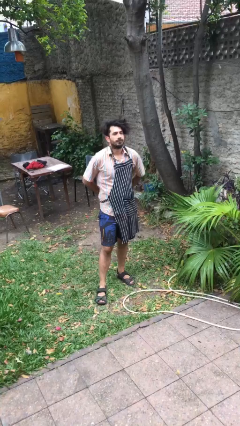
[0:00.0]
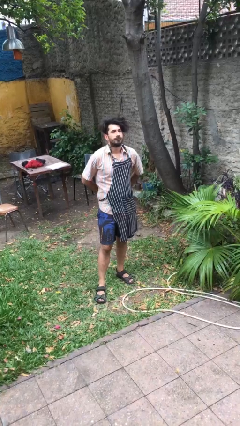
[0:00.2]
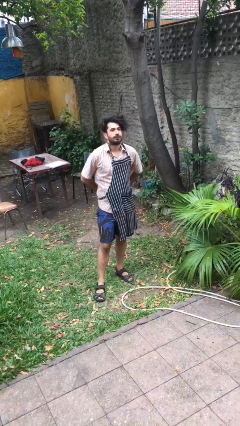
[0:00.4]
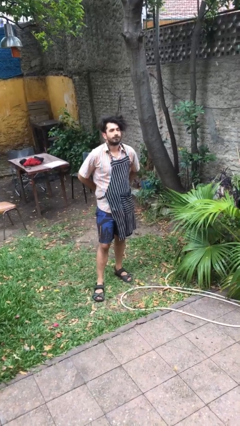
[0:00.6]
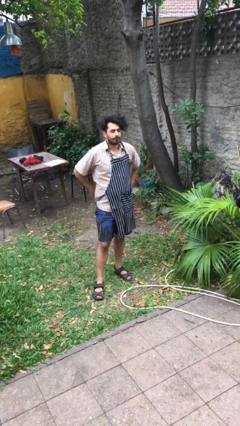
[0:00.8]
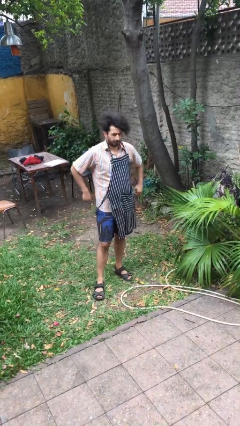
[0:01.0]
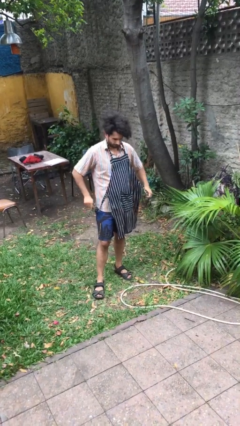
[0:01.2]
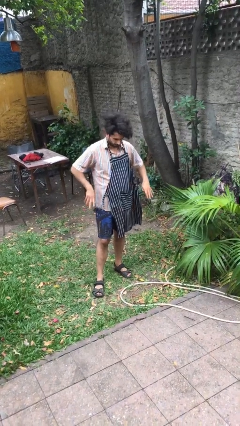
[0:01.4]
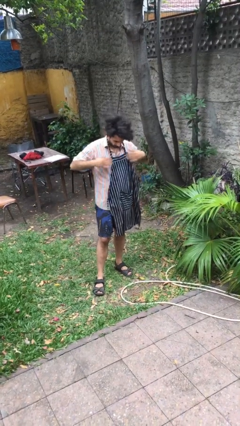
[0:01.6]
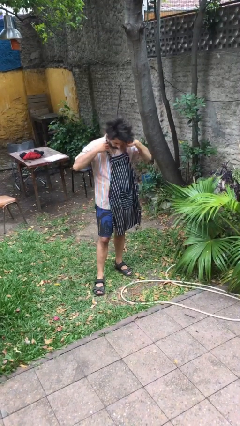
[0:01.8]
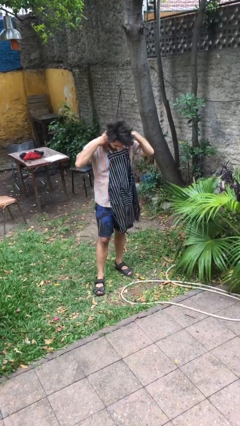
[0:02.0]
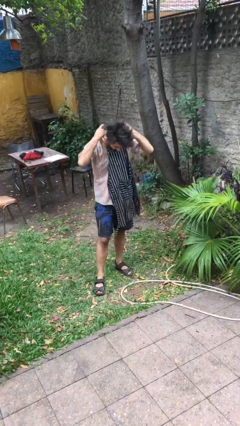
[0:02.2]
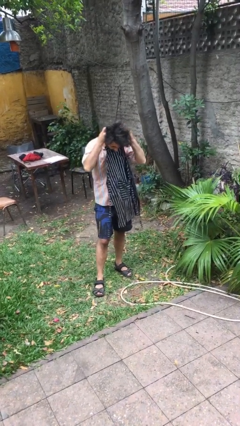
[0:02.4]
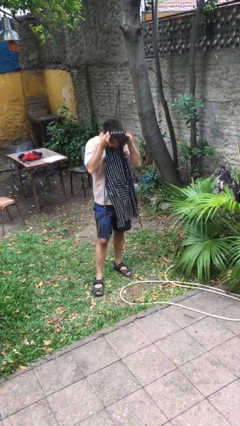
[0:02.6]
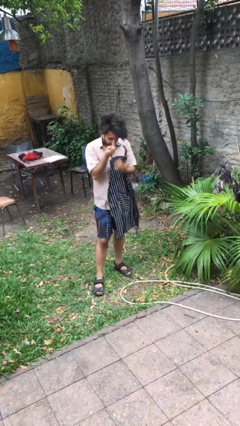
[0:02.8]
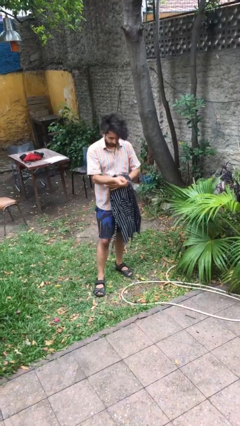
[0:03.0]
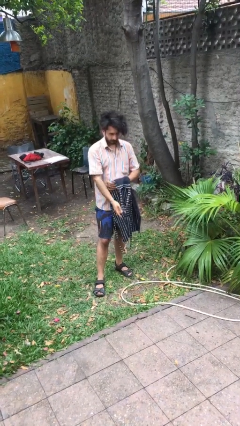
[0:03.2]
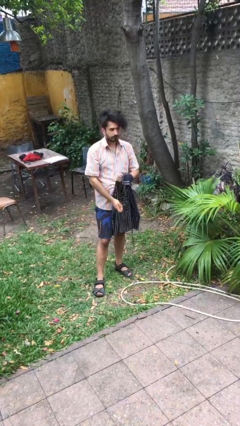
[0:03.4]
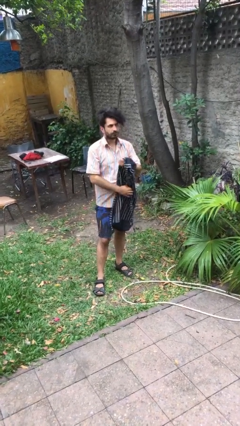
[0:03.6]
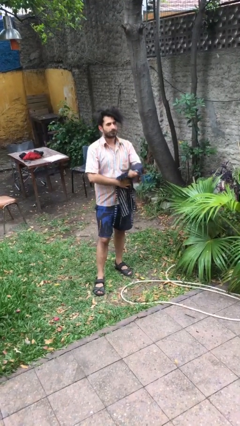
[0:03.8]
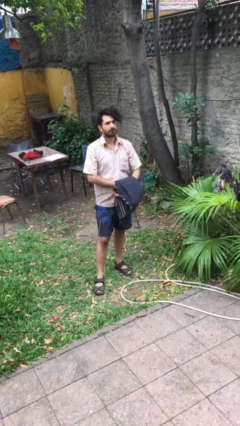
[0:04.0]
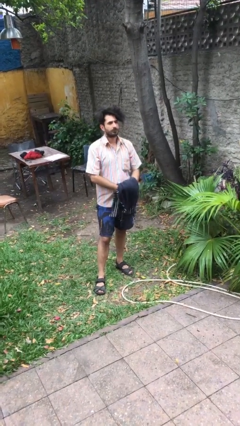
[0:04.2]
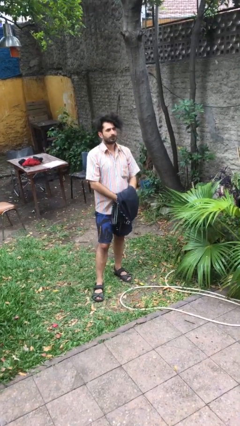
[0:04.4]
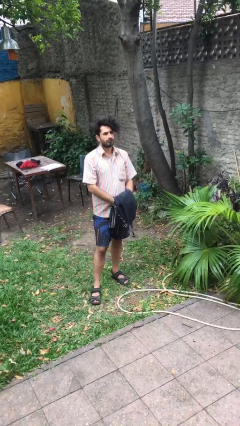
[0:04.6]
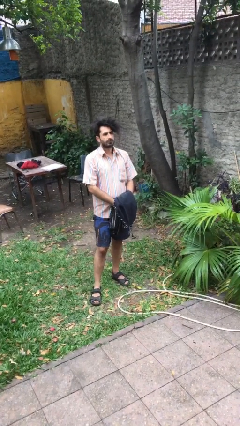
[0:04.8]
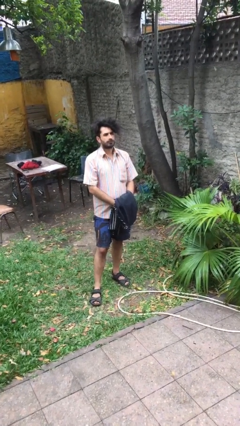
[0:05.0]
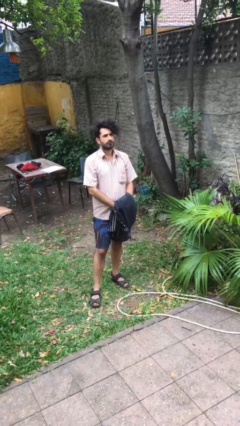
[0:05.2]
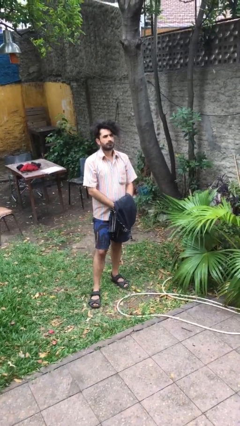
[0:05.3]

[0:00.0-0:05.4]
person takes off apron

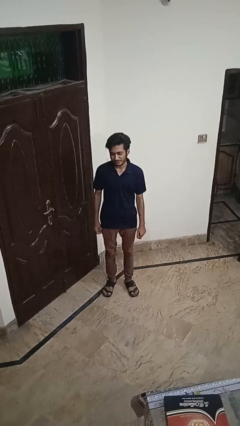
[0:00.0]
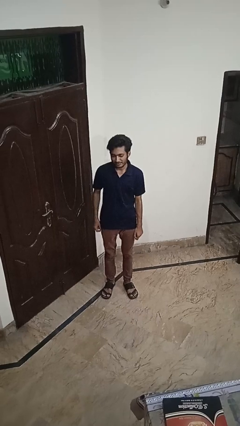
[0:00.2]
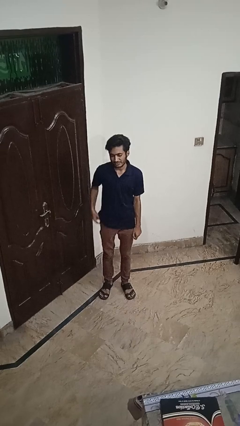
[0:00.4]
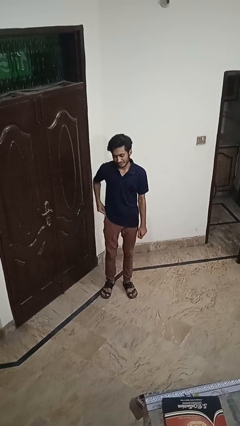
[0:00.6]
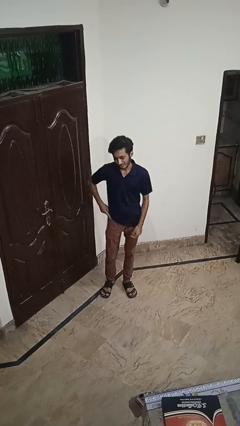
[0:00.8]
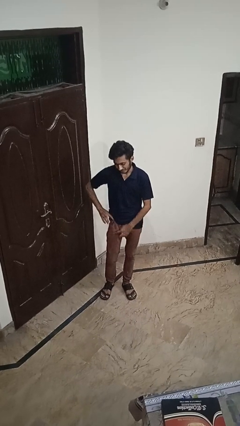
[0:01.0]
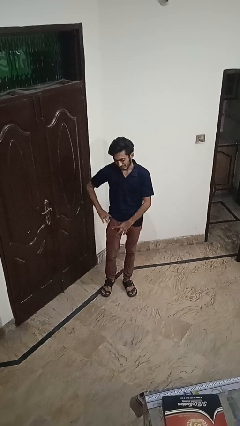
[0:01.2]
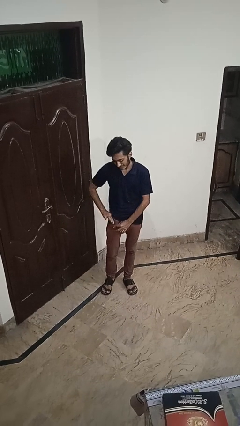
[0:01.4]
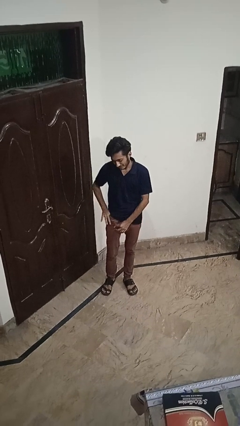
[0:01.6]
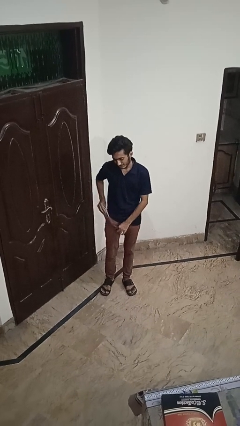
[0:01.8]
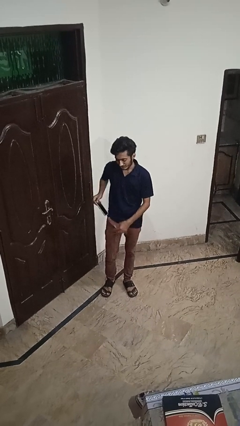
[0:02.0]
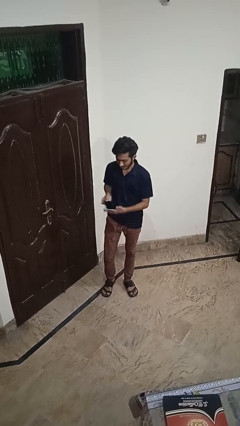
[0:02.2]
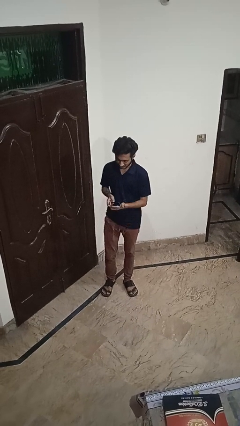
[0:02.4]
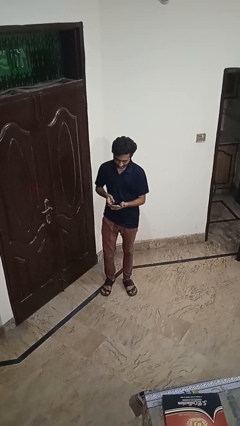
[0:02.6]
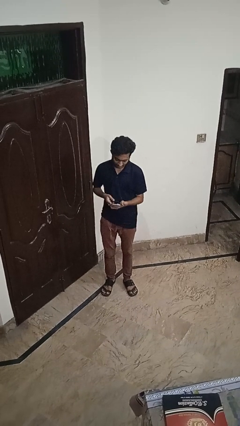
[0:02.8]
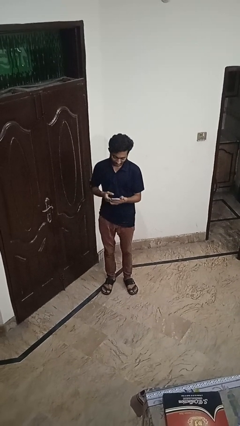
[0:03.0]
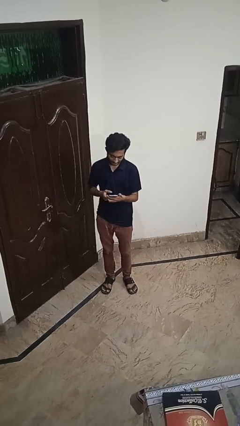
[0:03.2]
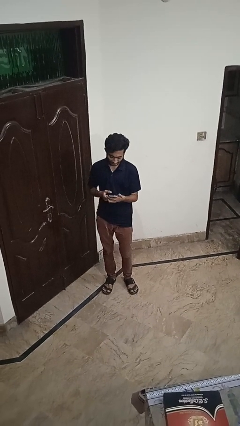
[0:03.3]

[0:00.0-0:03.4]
person takes phone from pocket

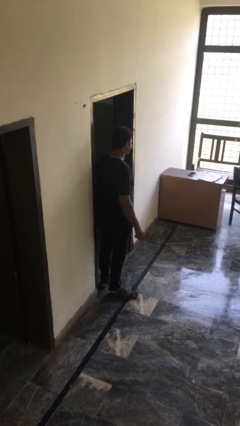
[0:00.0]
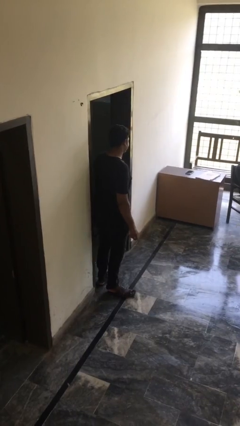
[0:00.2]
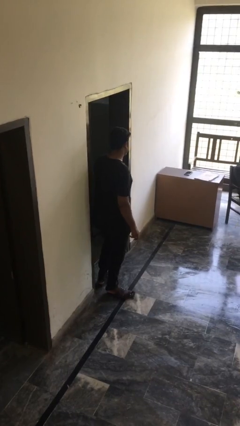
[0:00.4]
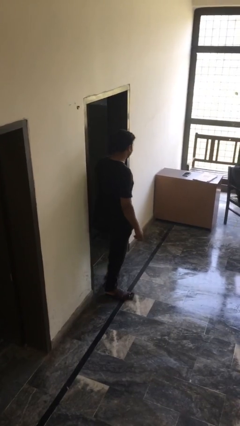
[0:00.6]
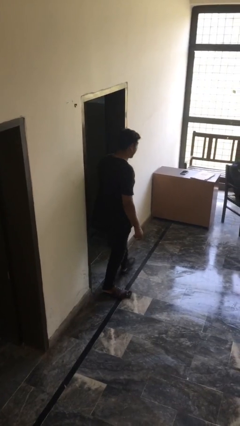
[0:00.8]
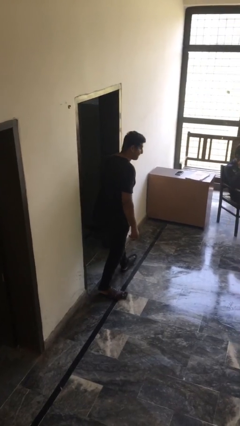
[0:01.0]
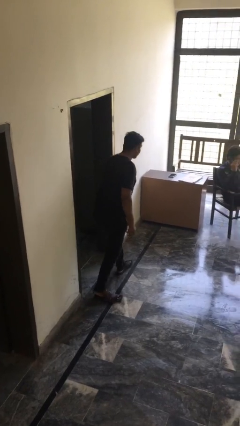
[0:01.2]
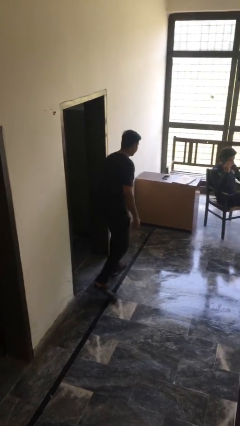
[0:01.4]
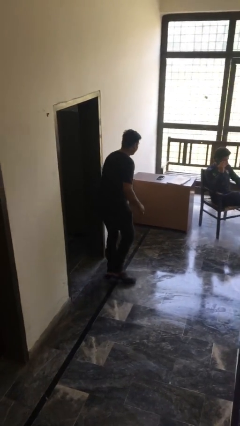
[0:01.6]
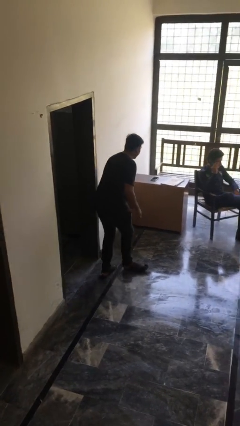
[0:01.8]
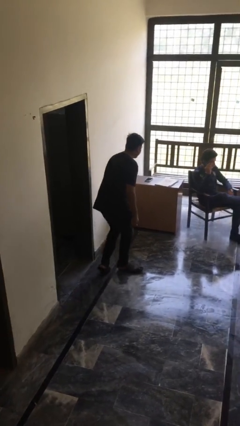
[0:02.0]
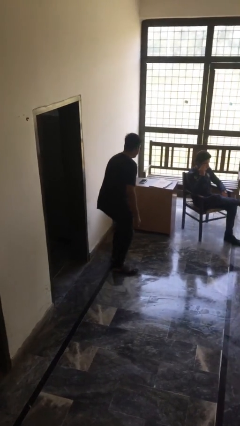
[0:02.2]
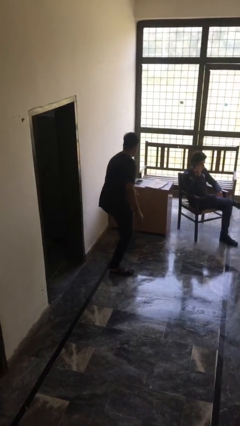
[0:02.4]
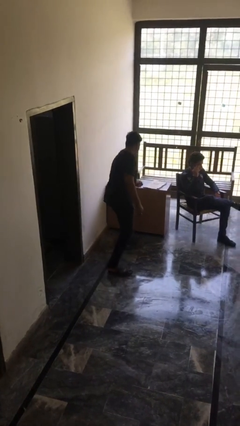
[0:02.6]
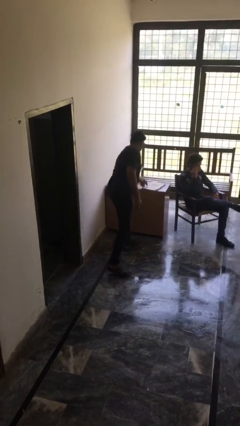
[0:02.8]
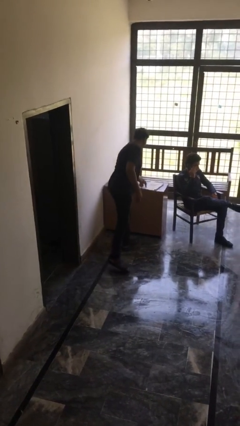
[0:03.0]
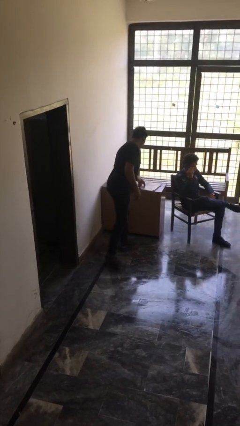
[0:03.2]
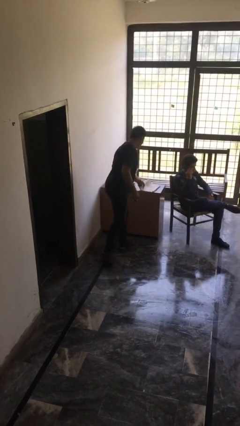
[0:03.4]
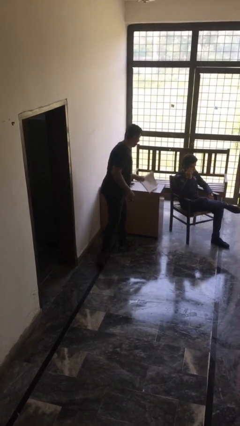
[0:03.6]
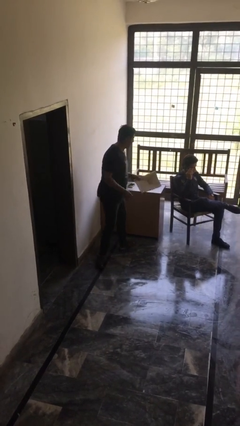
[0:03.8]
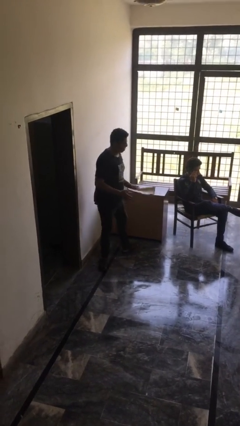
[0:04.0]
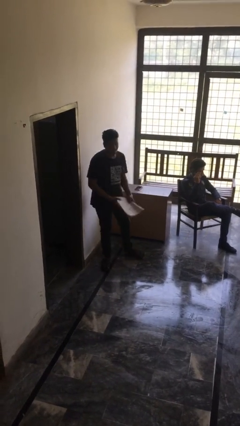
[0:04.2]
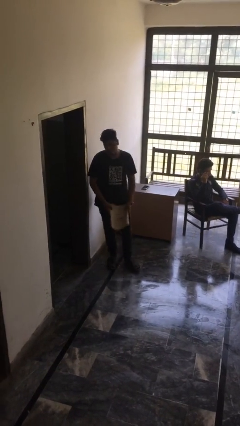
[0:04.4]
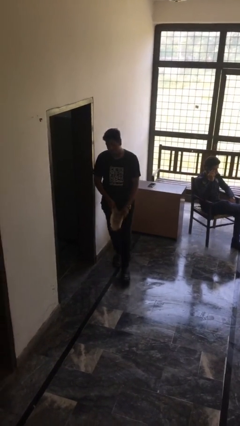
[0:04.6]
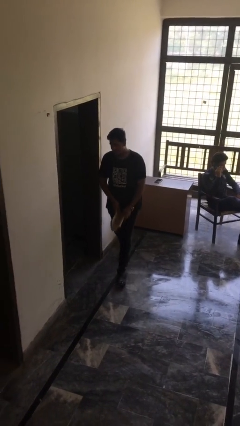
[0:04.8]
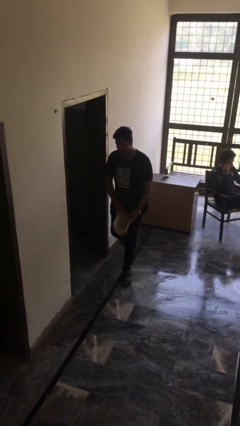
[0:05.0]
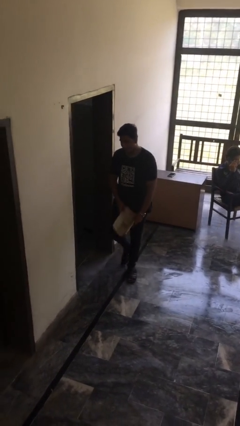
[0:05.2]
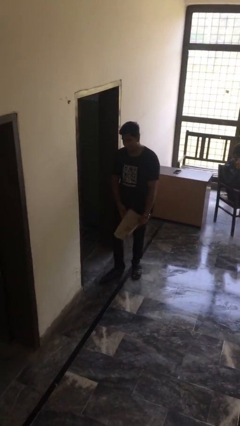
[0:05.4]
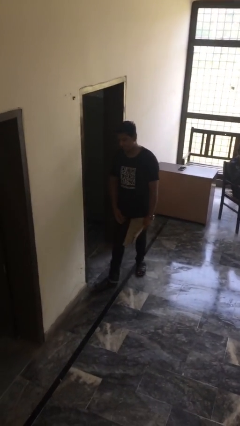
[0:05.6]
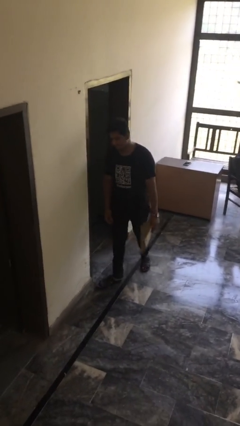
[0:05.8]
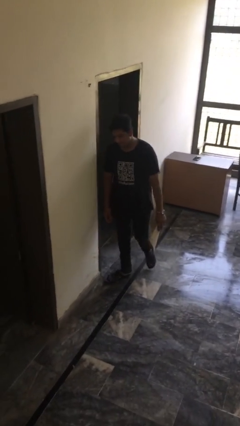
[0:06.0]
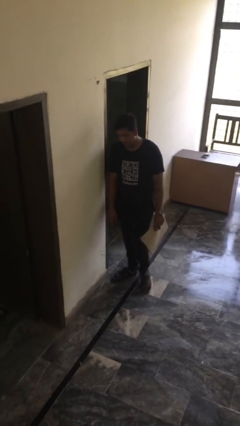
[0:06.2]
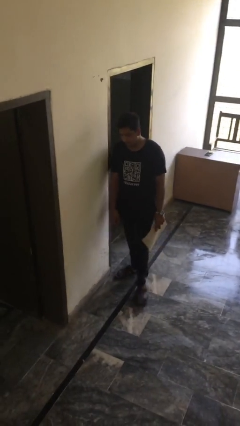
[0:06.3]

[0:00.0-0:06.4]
person steals object from person

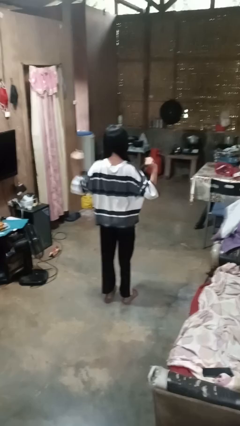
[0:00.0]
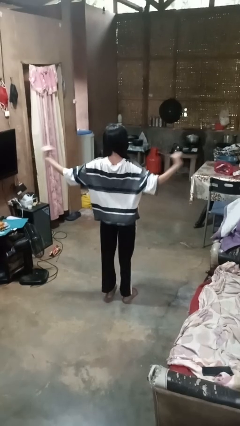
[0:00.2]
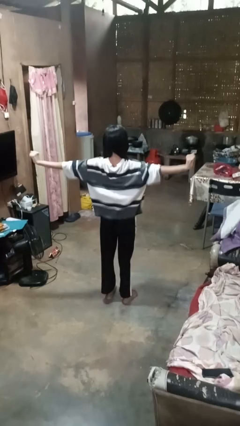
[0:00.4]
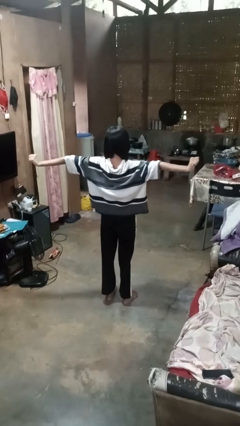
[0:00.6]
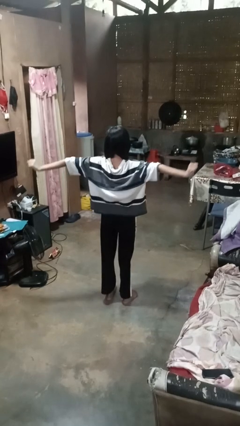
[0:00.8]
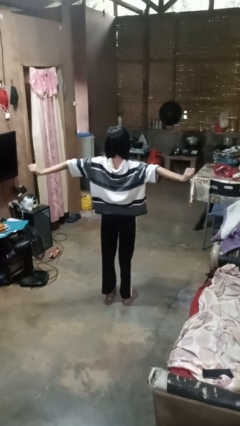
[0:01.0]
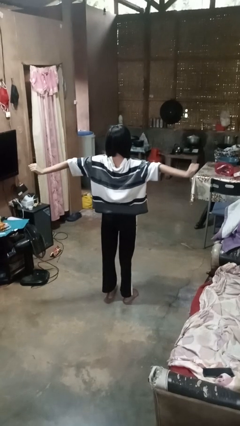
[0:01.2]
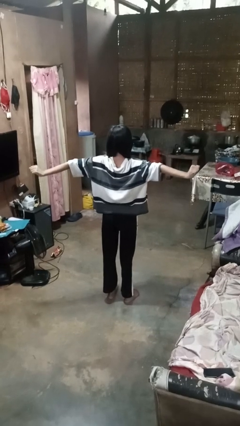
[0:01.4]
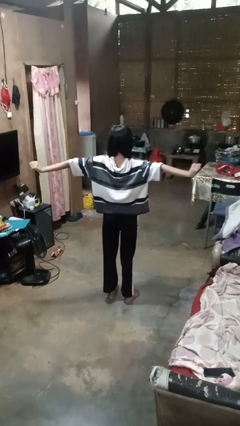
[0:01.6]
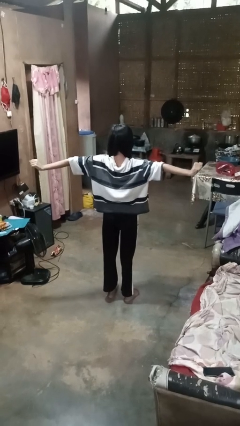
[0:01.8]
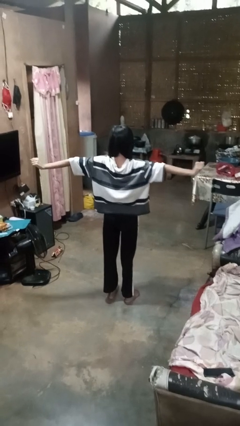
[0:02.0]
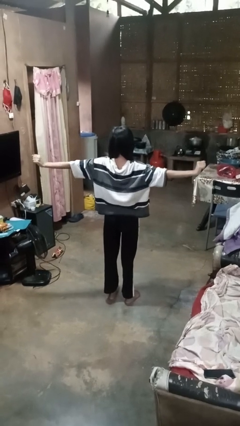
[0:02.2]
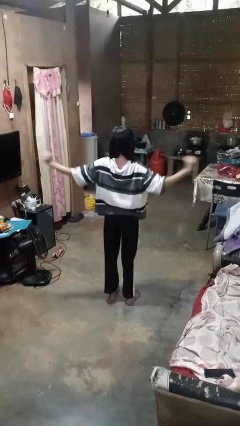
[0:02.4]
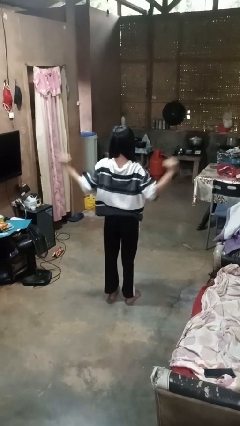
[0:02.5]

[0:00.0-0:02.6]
person stretches arms to side

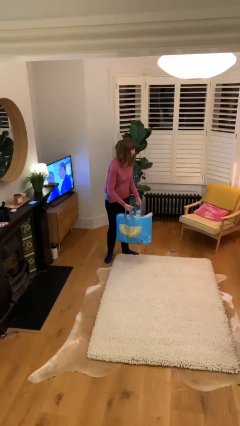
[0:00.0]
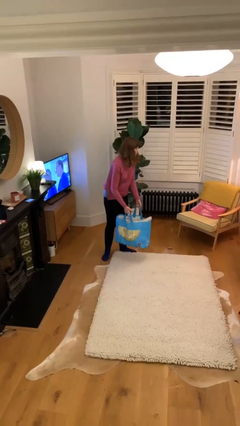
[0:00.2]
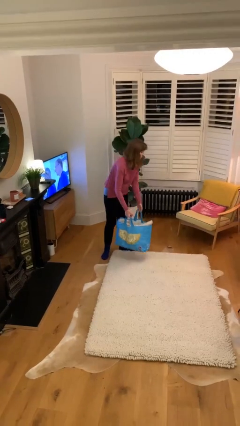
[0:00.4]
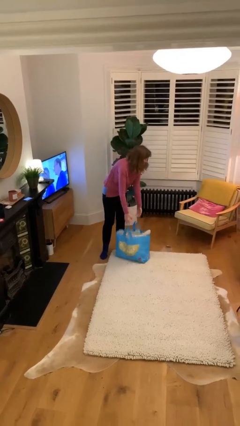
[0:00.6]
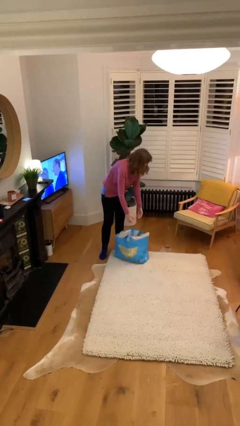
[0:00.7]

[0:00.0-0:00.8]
person puts down object on floor
